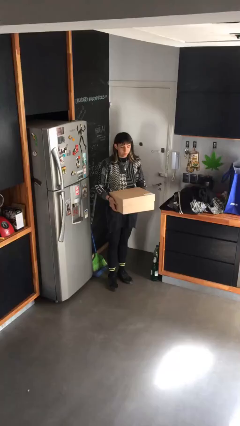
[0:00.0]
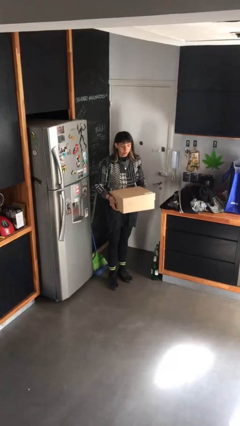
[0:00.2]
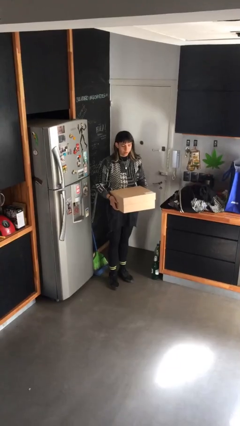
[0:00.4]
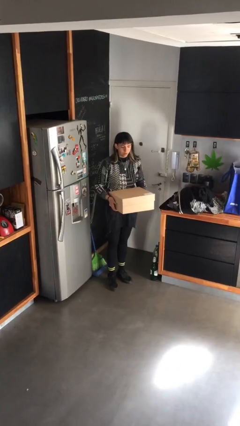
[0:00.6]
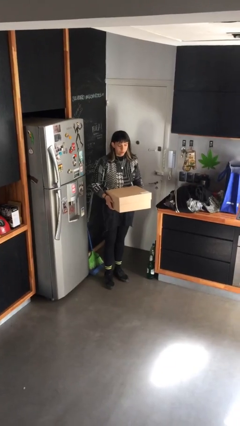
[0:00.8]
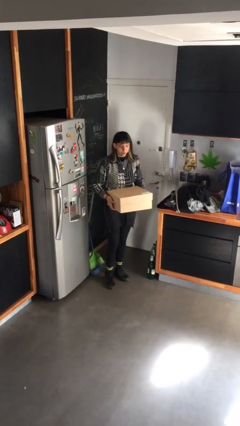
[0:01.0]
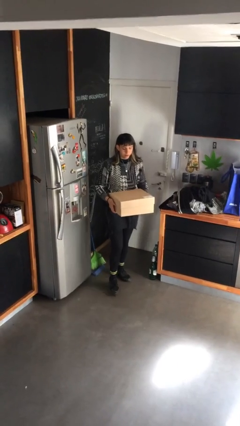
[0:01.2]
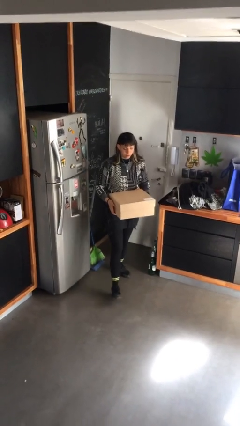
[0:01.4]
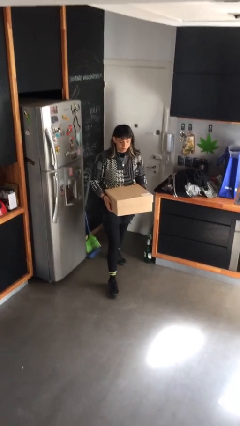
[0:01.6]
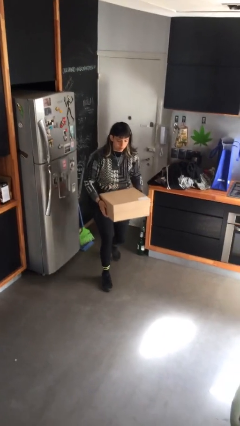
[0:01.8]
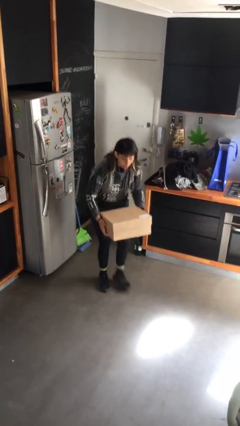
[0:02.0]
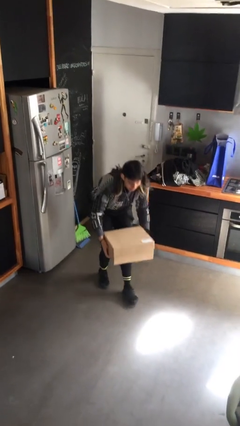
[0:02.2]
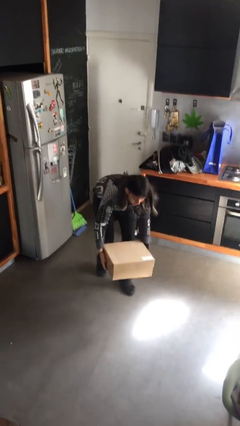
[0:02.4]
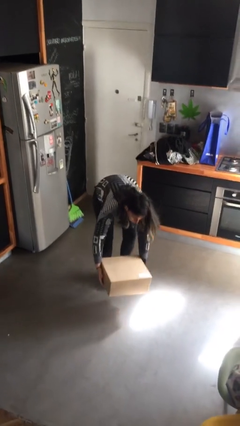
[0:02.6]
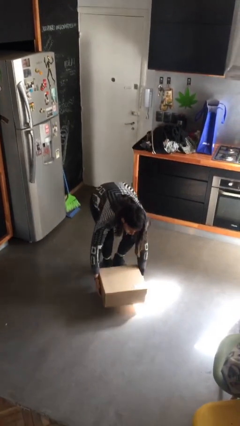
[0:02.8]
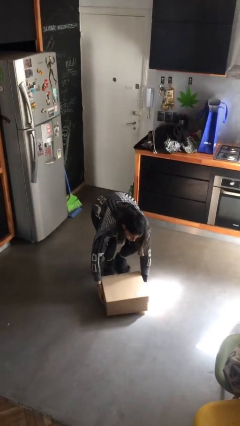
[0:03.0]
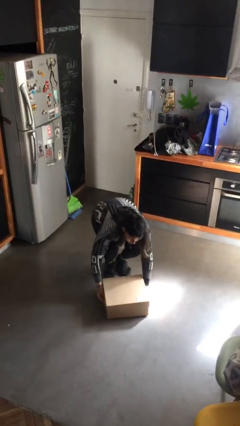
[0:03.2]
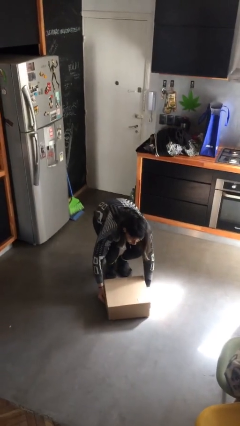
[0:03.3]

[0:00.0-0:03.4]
person puts down object on floor

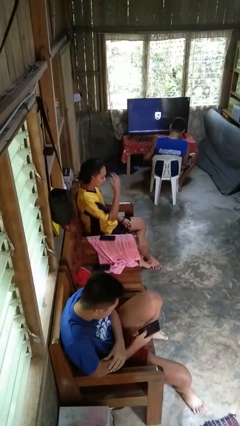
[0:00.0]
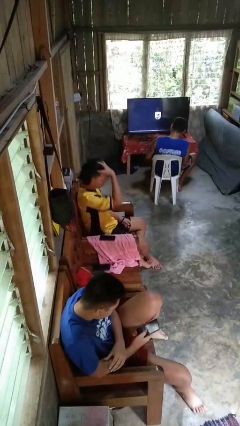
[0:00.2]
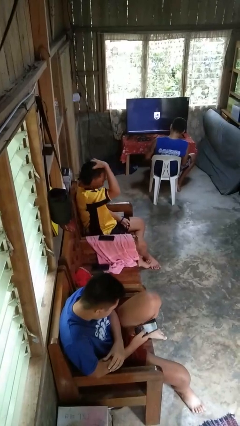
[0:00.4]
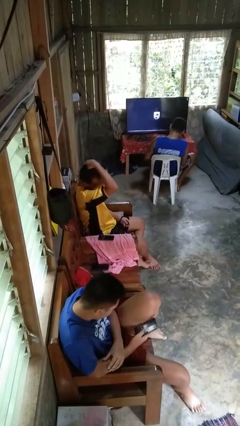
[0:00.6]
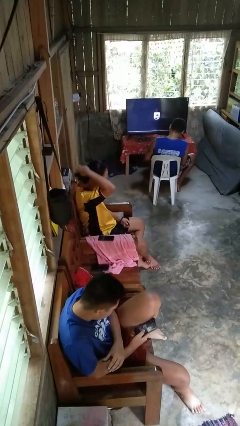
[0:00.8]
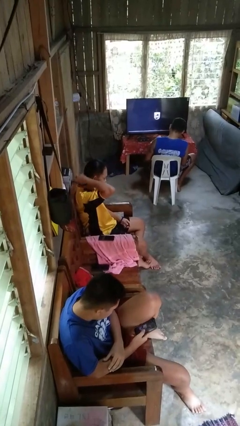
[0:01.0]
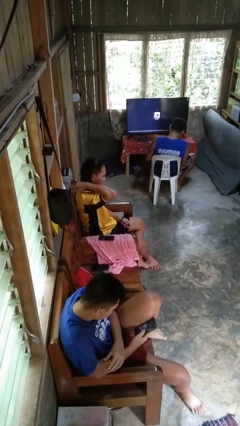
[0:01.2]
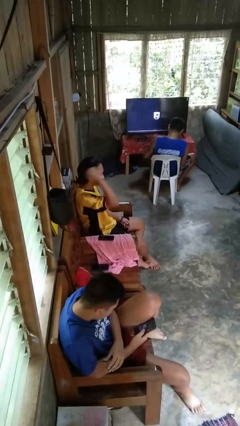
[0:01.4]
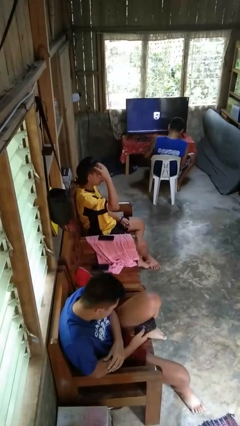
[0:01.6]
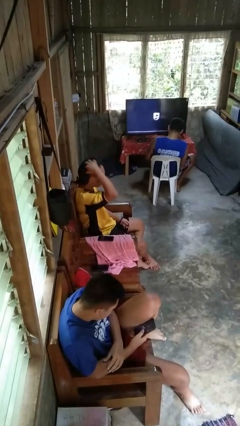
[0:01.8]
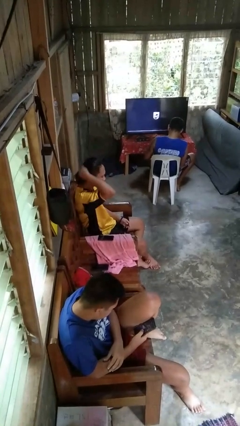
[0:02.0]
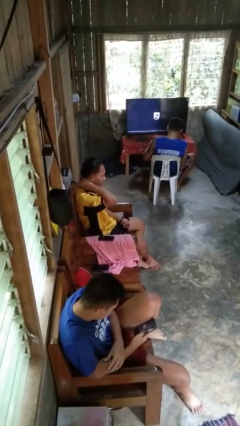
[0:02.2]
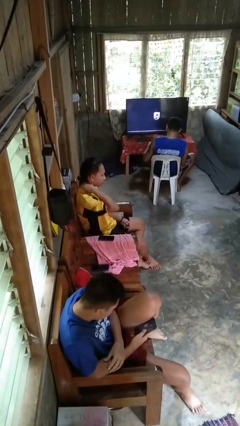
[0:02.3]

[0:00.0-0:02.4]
person strokes hair

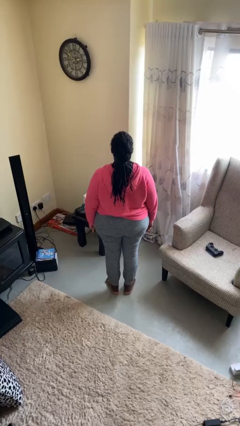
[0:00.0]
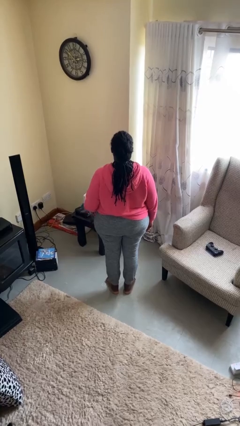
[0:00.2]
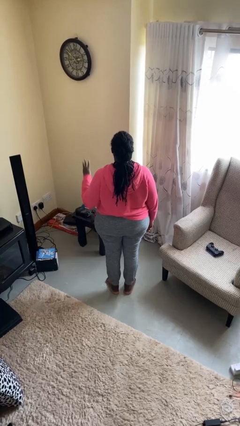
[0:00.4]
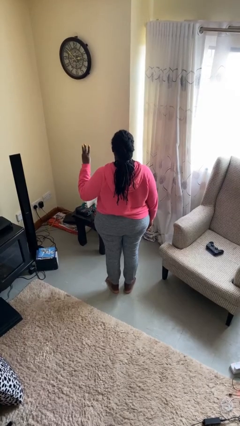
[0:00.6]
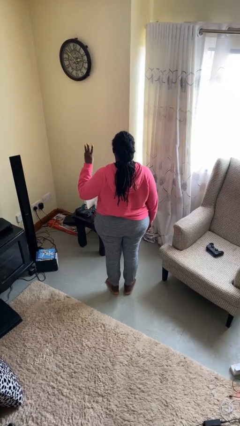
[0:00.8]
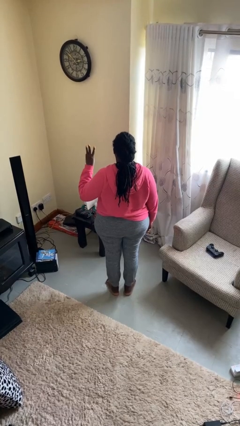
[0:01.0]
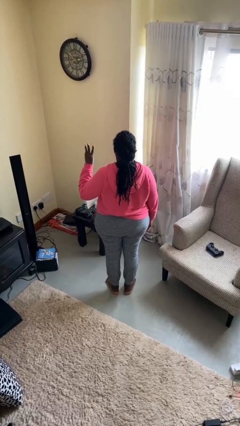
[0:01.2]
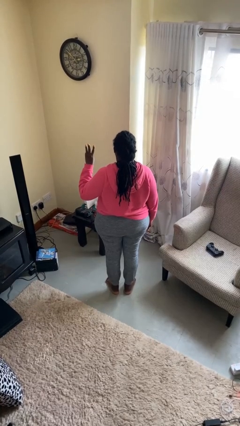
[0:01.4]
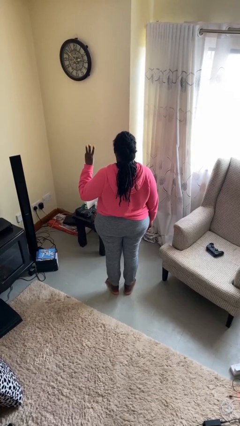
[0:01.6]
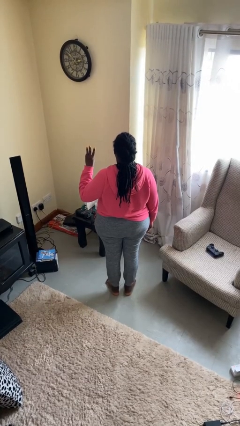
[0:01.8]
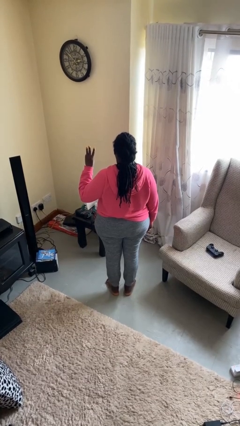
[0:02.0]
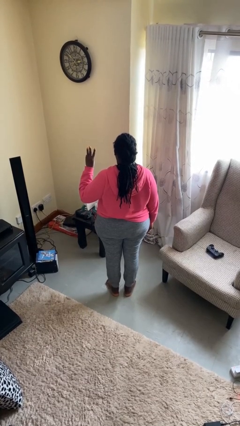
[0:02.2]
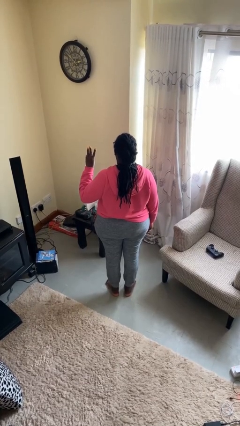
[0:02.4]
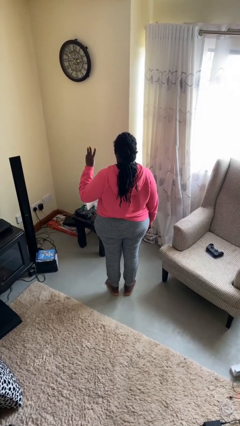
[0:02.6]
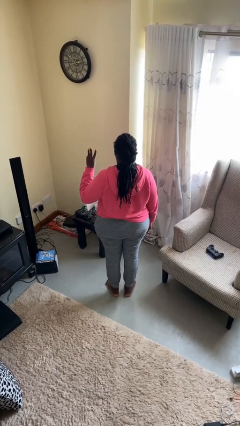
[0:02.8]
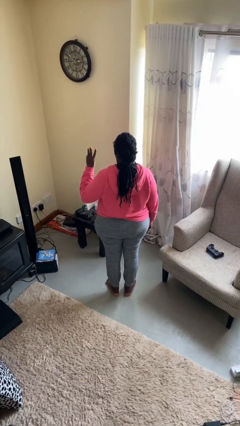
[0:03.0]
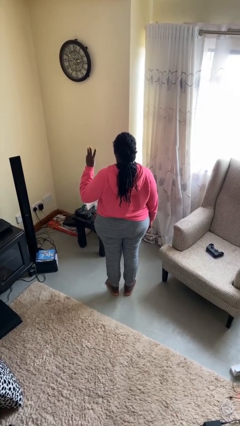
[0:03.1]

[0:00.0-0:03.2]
person gestures number three

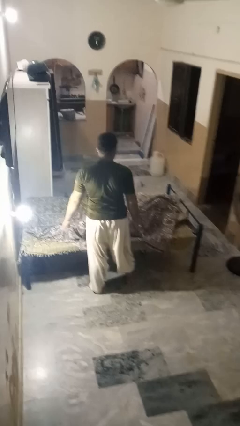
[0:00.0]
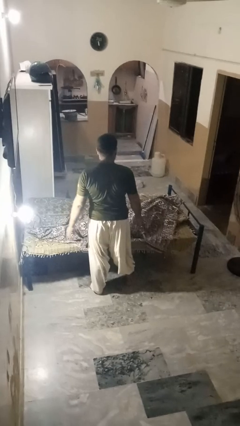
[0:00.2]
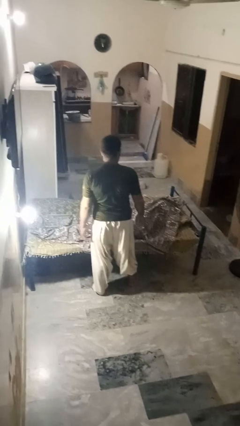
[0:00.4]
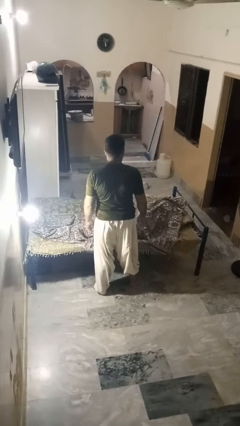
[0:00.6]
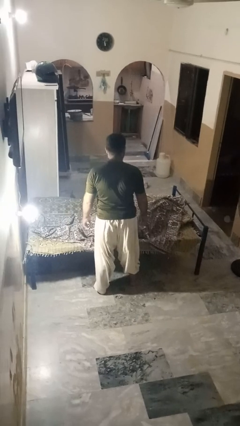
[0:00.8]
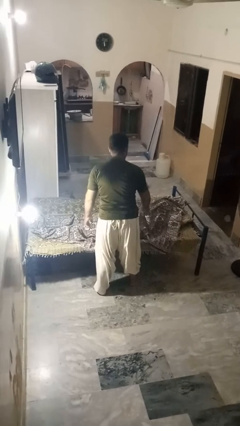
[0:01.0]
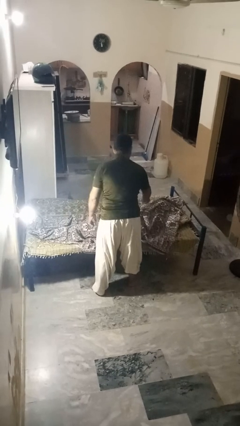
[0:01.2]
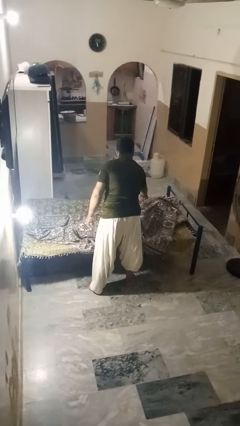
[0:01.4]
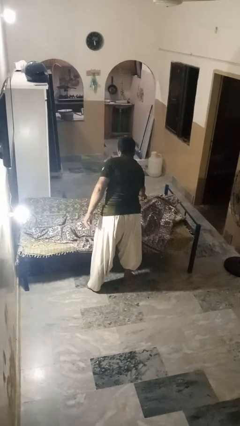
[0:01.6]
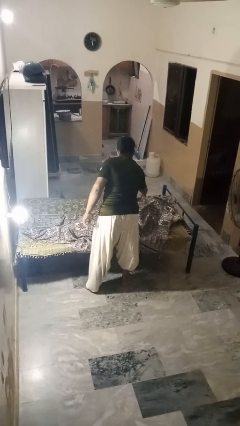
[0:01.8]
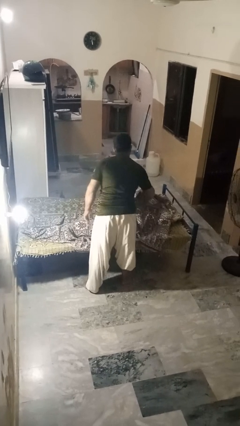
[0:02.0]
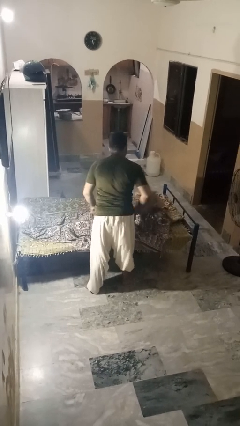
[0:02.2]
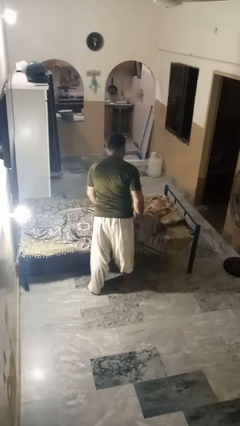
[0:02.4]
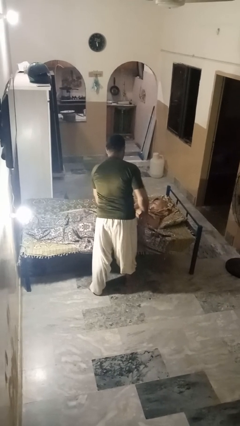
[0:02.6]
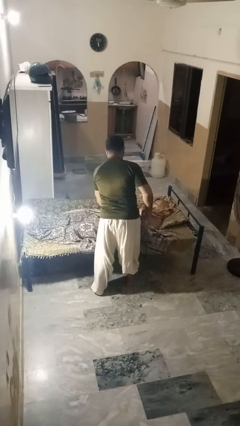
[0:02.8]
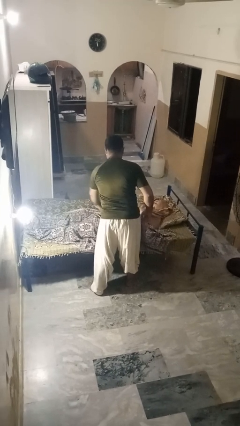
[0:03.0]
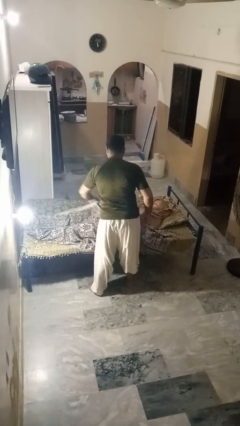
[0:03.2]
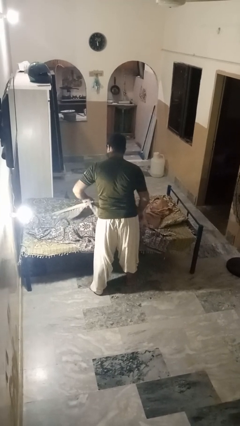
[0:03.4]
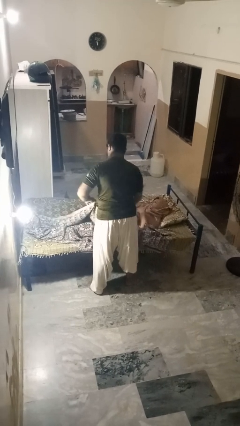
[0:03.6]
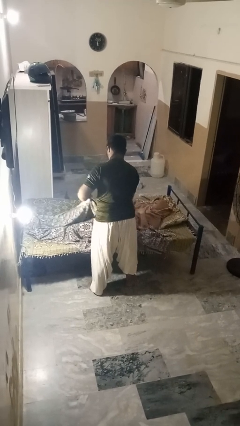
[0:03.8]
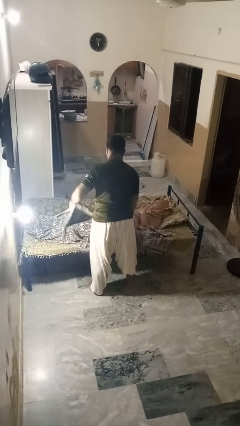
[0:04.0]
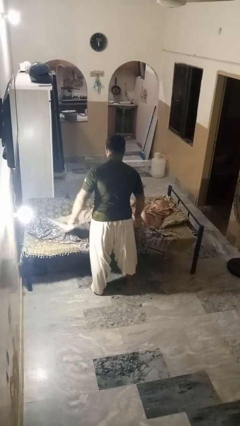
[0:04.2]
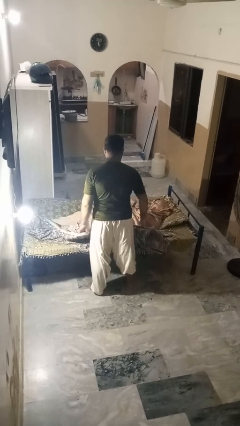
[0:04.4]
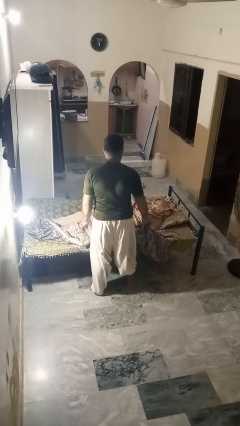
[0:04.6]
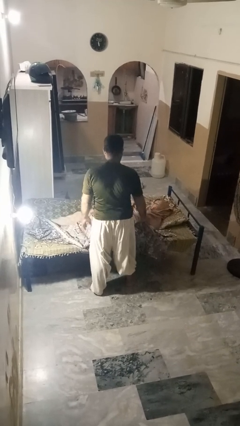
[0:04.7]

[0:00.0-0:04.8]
person uncovers friend with blanket

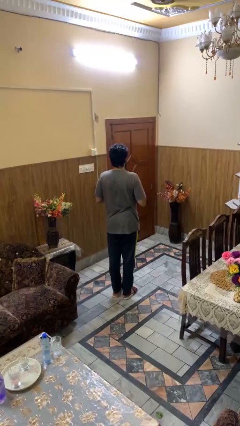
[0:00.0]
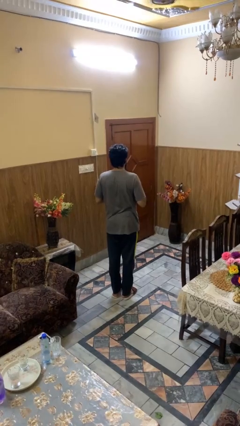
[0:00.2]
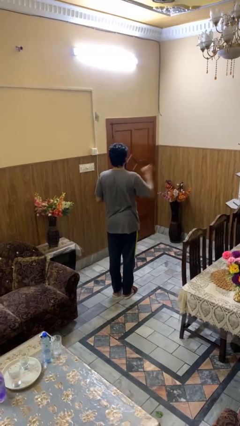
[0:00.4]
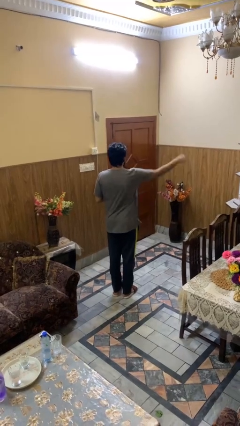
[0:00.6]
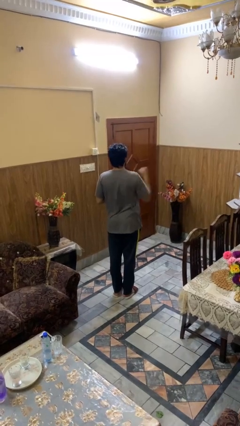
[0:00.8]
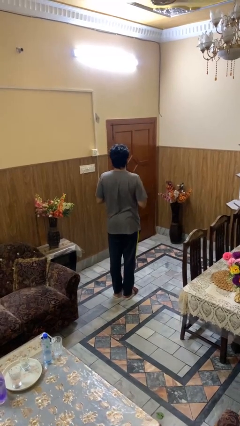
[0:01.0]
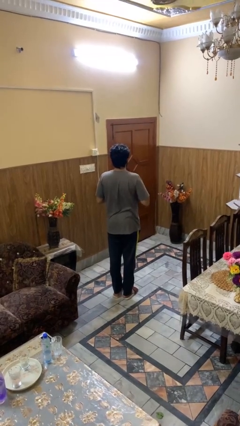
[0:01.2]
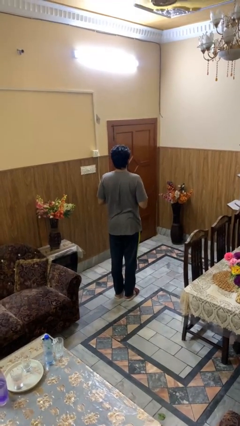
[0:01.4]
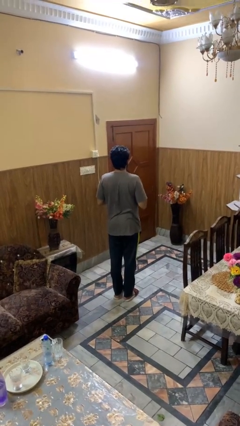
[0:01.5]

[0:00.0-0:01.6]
person punches

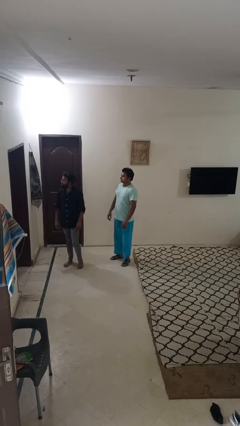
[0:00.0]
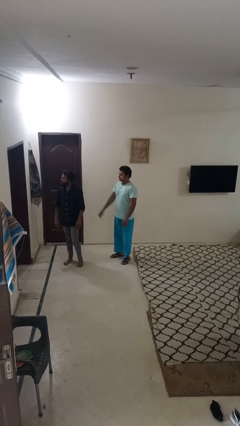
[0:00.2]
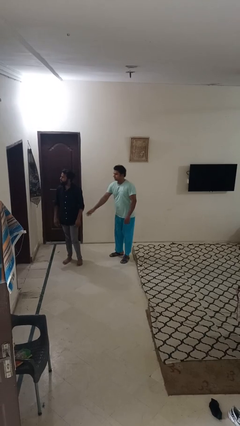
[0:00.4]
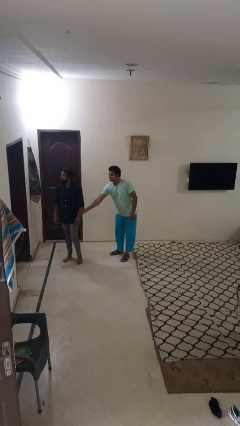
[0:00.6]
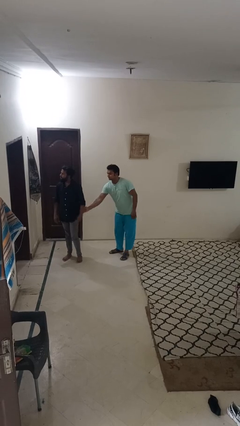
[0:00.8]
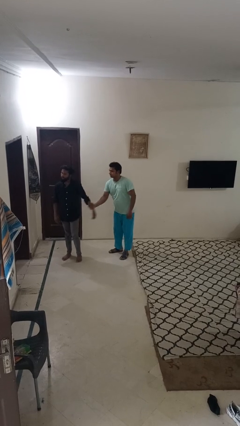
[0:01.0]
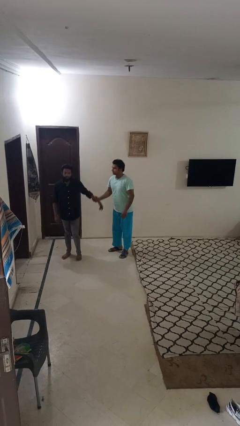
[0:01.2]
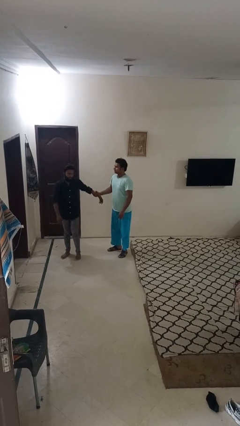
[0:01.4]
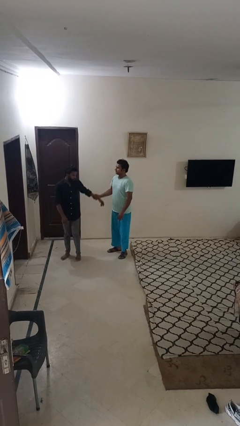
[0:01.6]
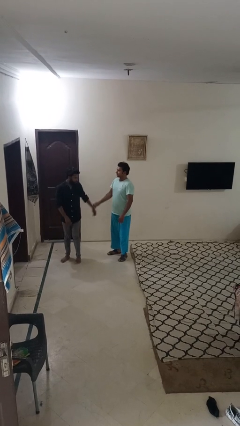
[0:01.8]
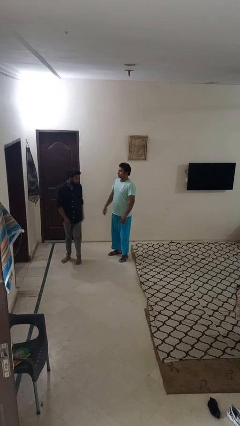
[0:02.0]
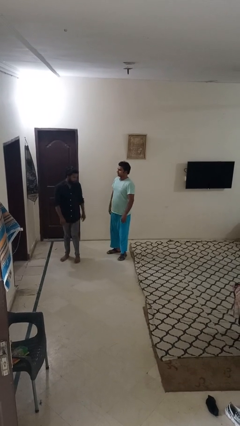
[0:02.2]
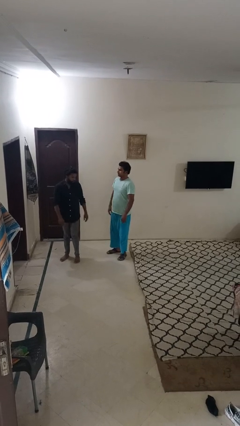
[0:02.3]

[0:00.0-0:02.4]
person grabs person by forearm
